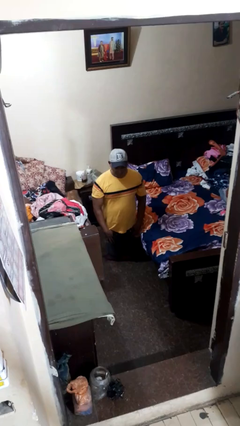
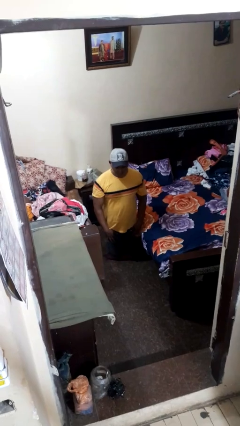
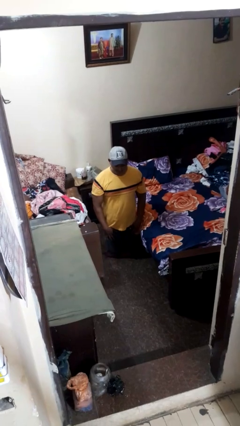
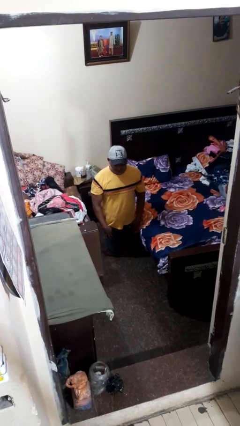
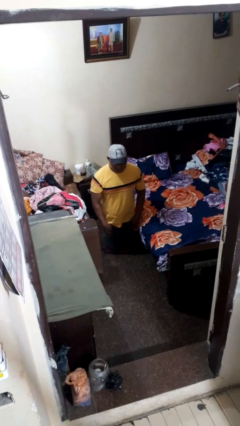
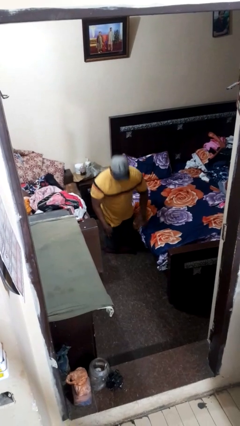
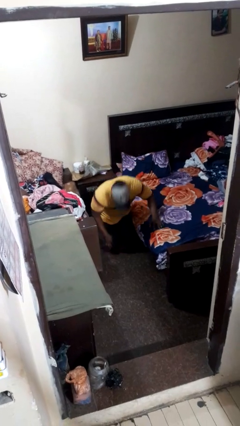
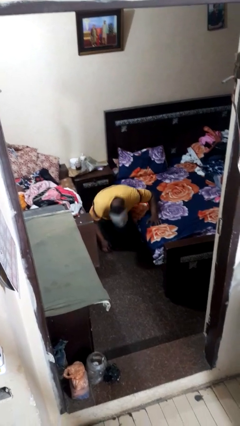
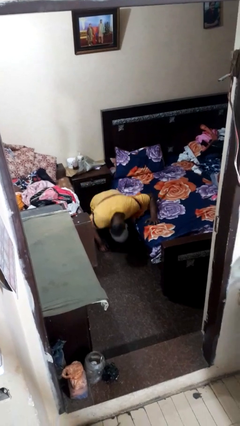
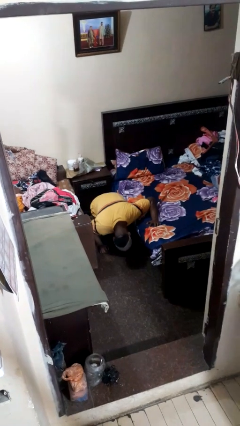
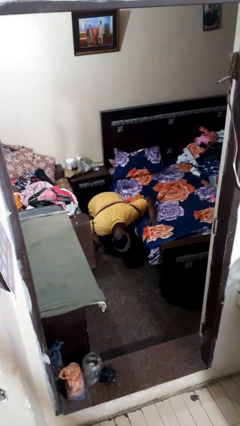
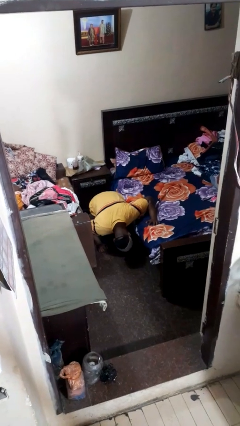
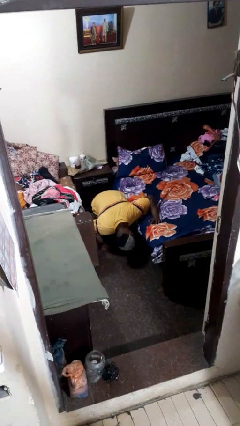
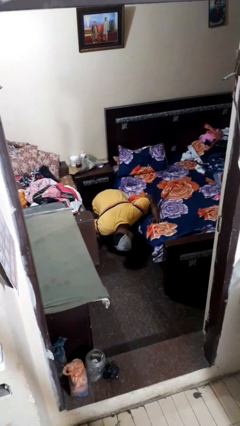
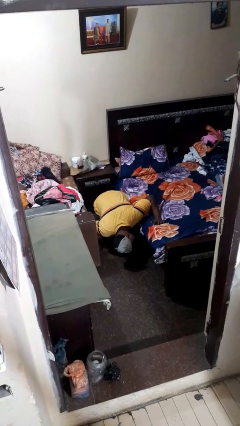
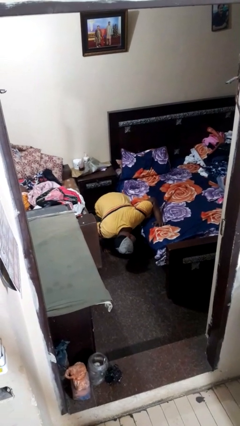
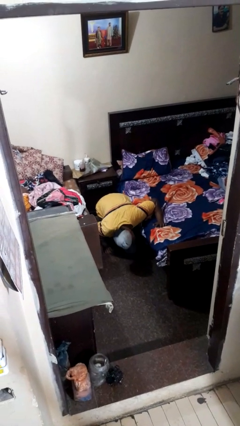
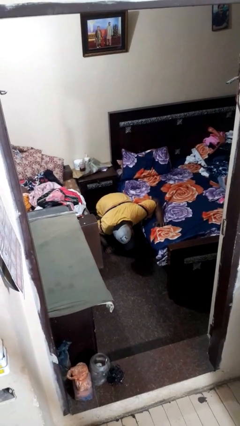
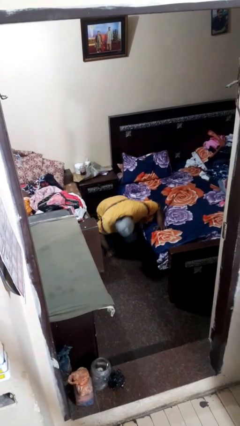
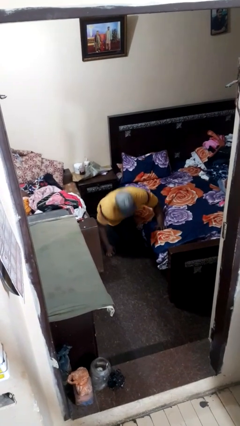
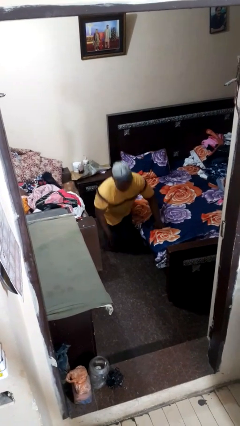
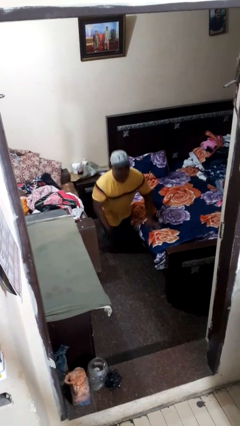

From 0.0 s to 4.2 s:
person searches under bed

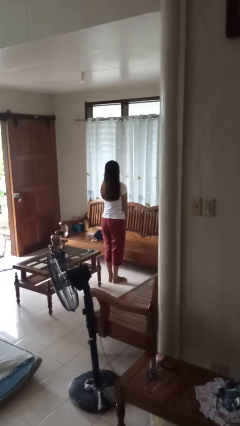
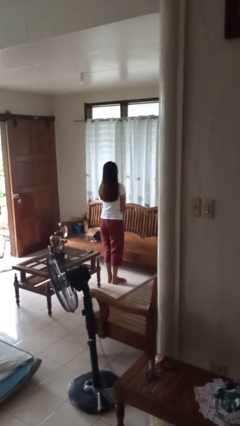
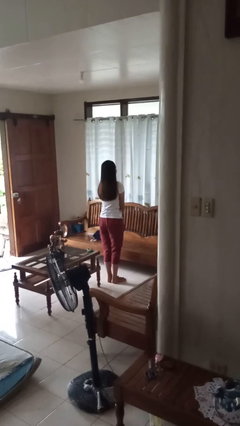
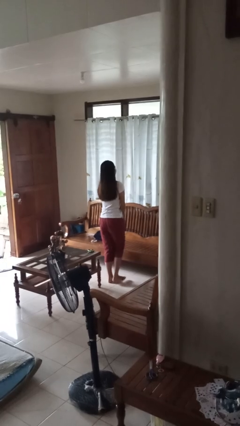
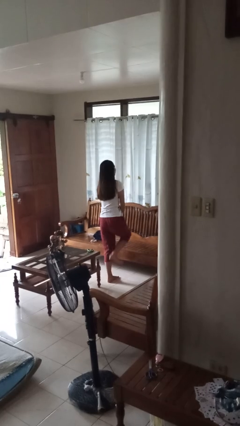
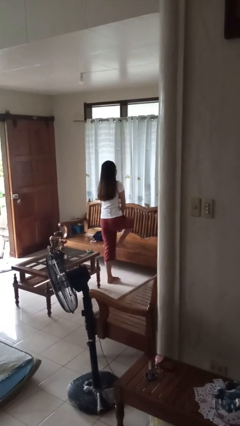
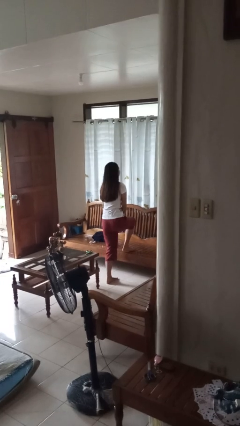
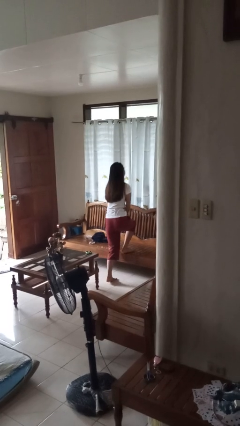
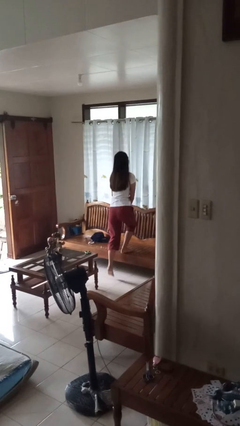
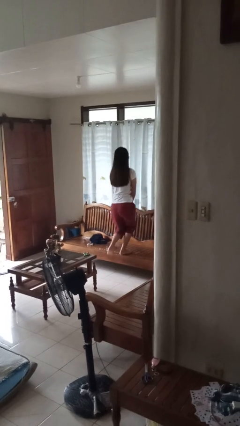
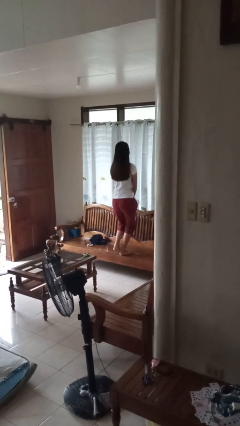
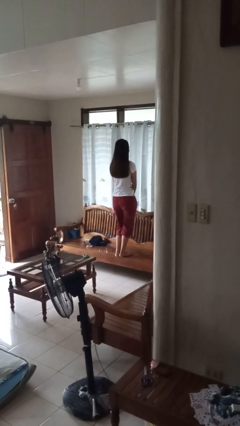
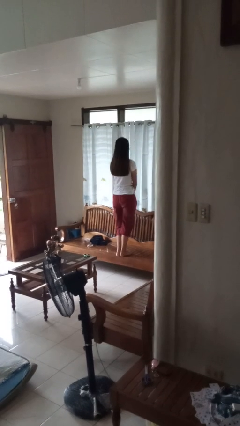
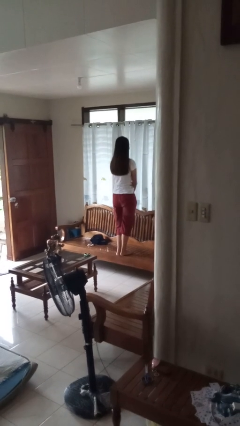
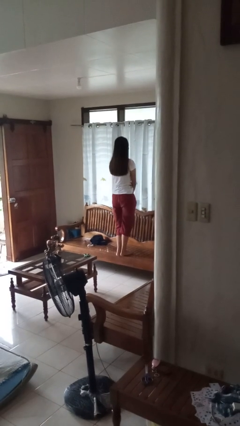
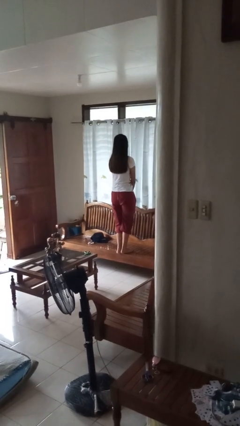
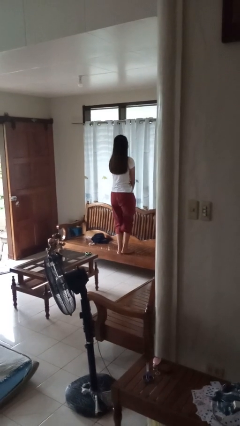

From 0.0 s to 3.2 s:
person climbs on chair

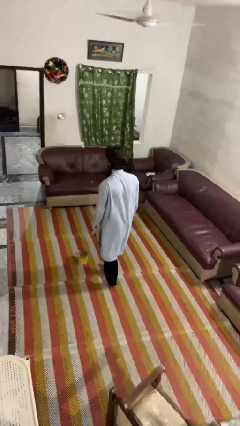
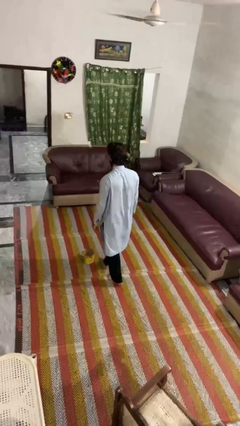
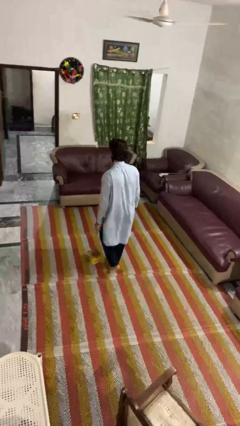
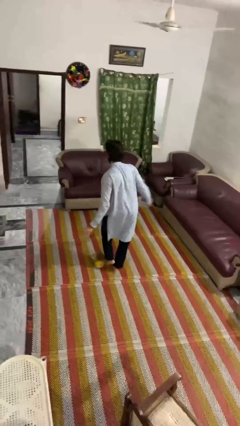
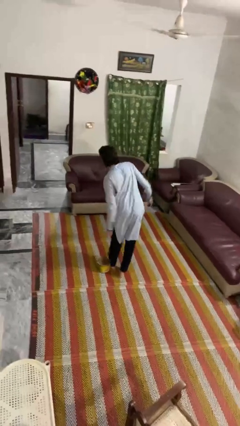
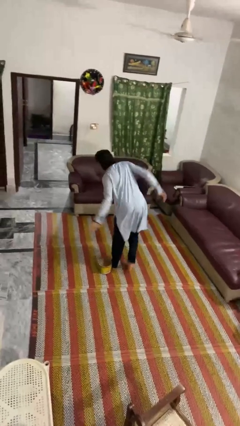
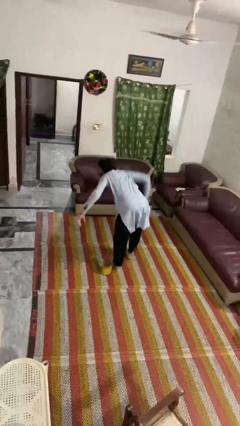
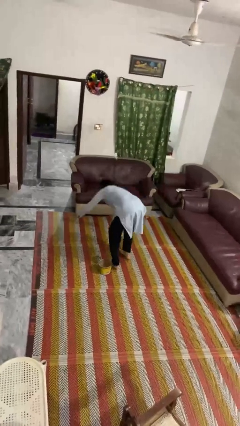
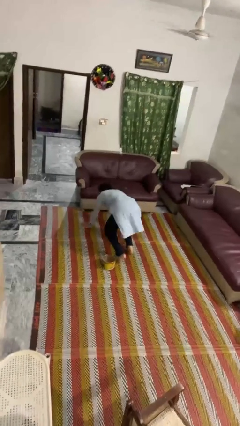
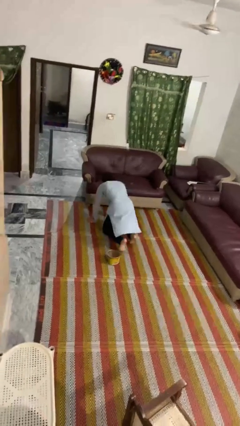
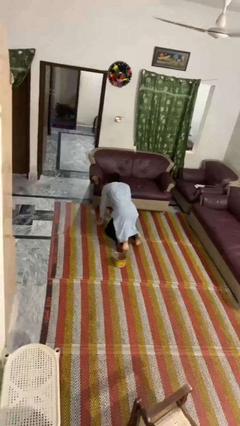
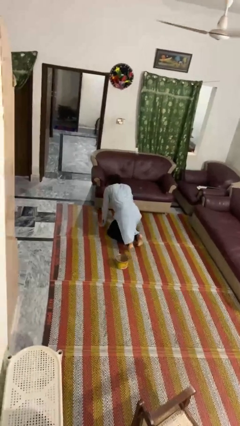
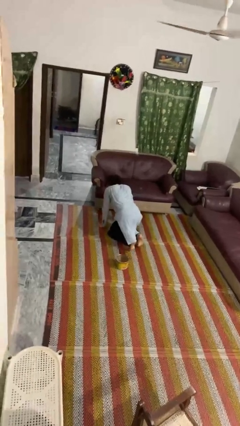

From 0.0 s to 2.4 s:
person trips on object on floor

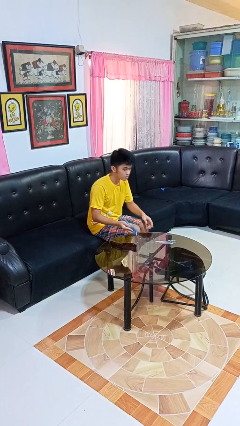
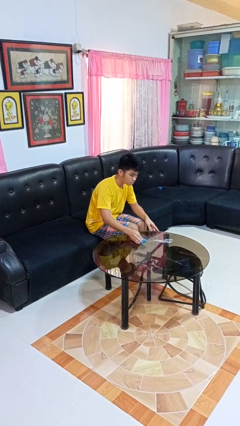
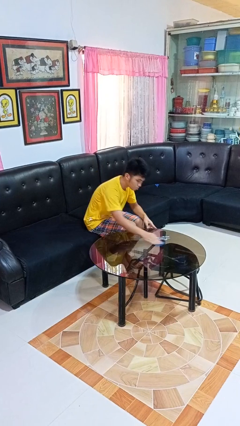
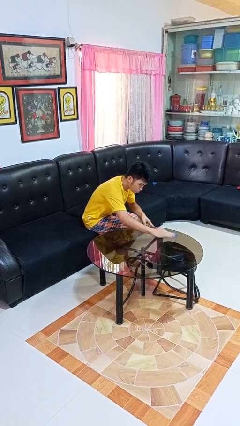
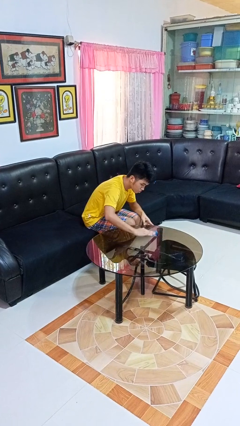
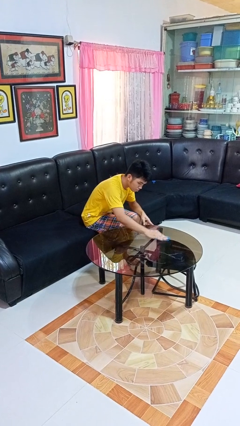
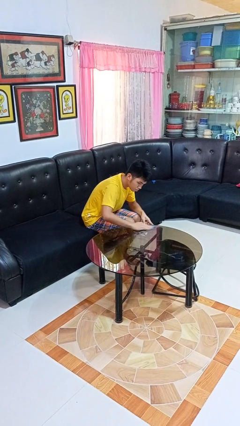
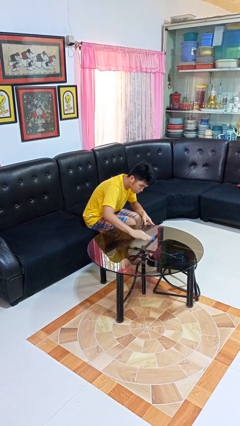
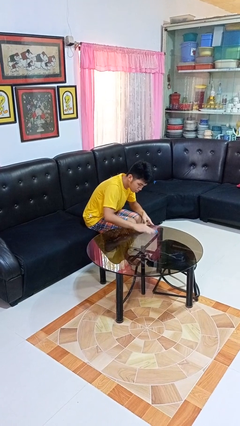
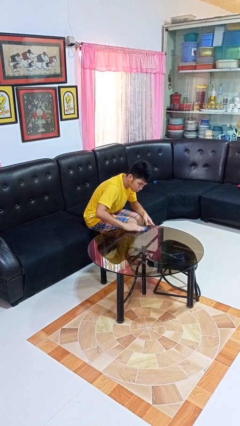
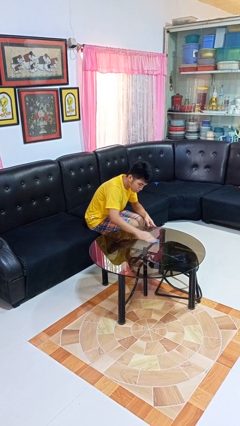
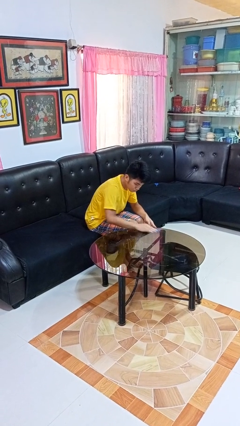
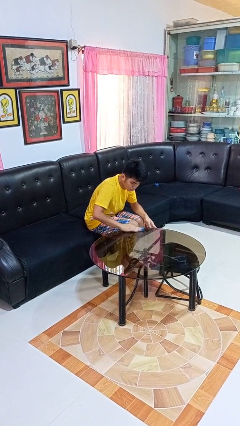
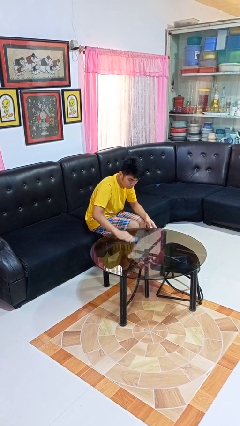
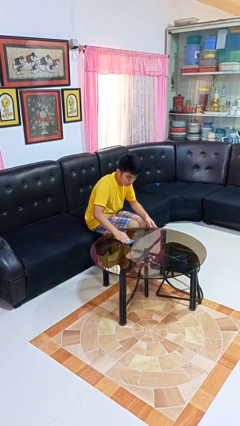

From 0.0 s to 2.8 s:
person cleans table with rag

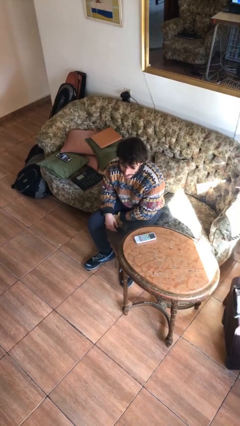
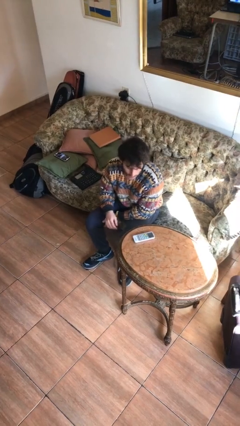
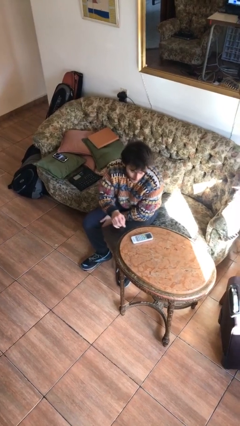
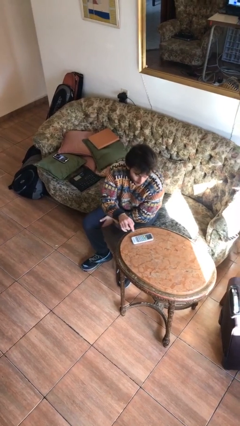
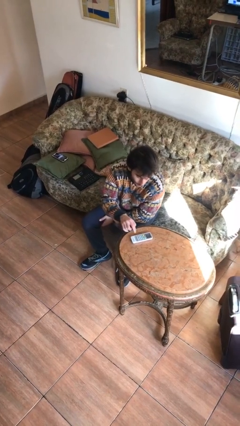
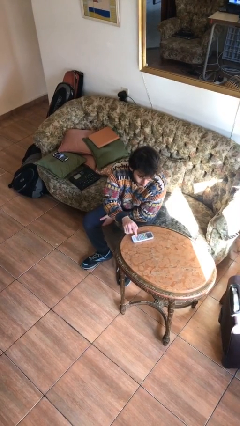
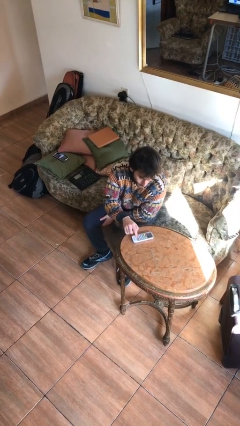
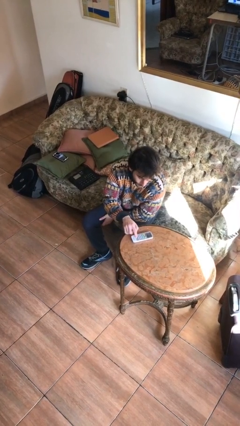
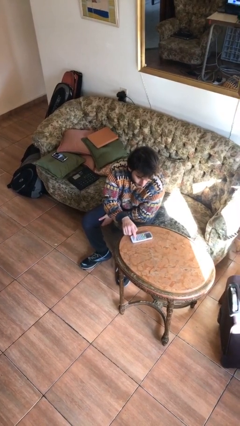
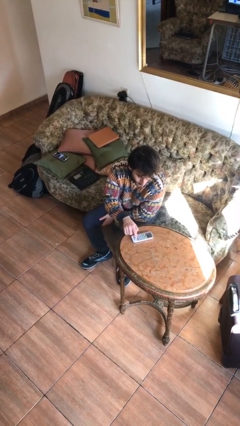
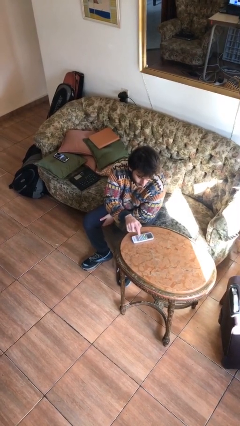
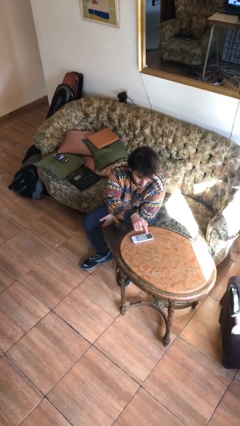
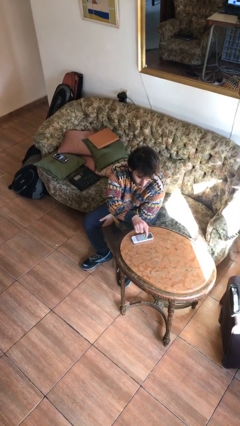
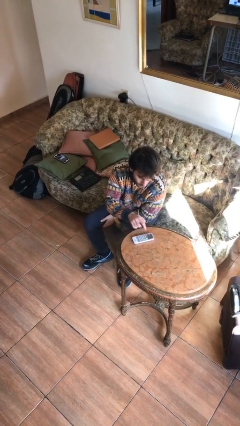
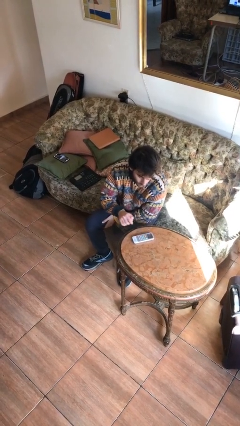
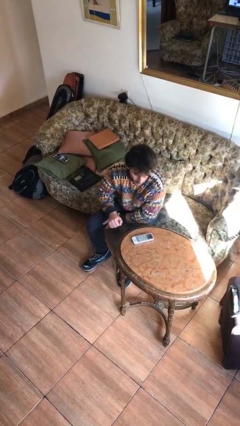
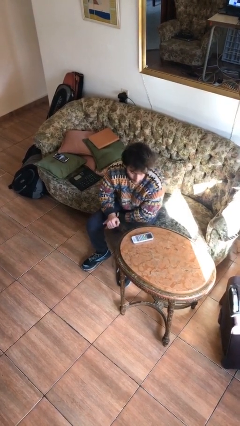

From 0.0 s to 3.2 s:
person taps object with finger

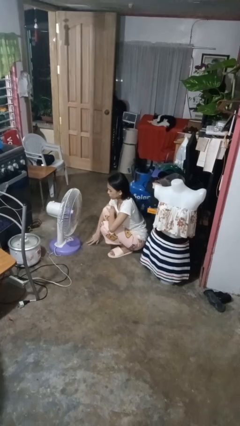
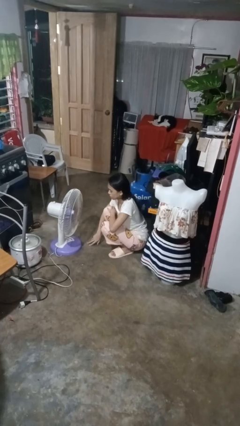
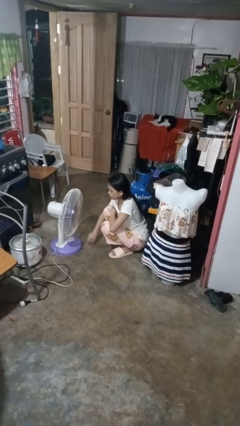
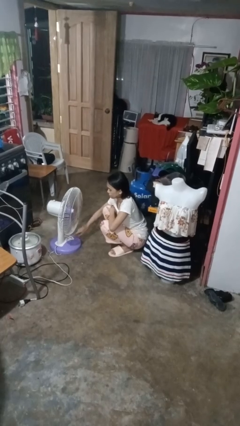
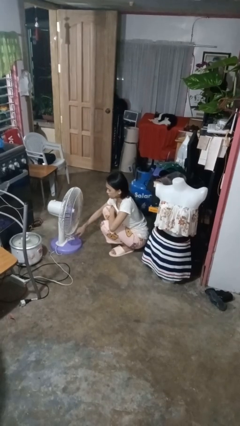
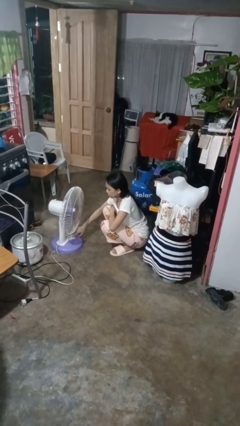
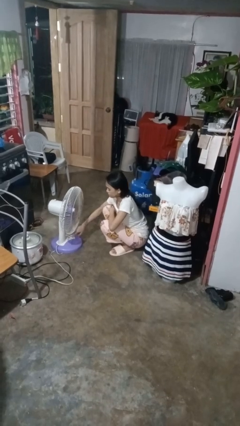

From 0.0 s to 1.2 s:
person turns off fan

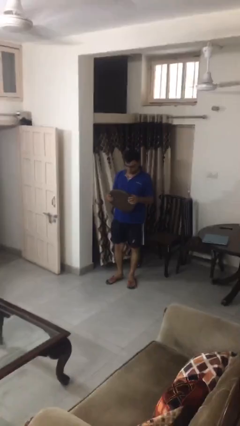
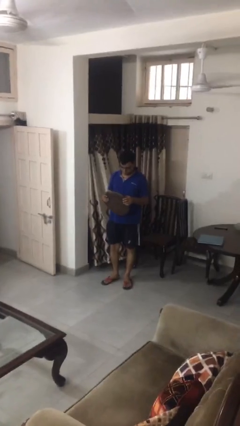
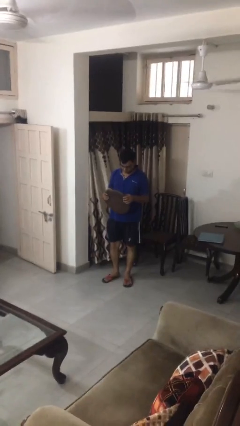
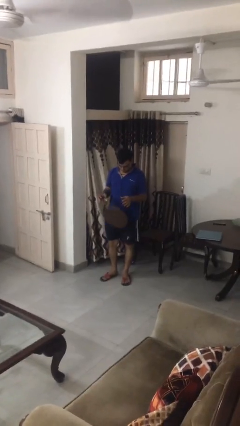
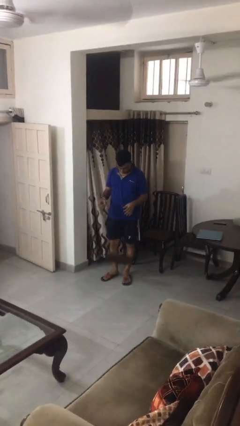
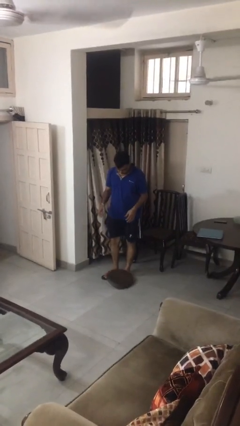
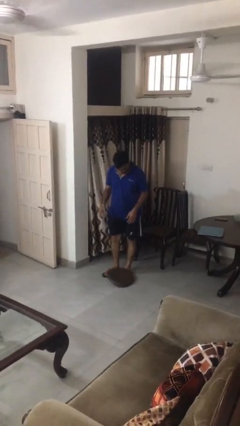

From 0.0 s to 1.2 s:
person drops object
